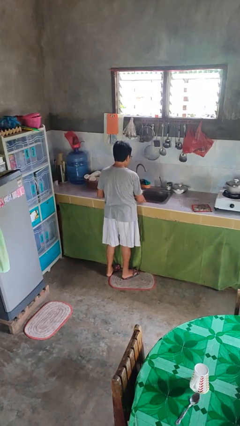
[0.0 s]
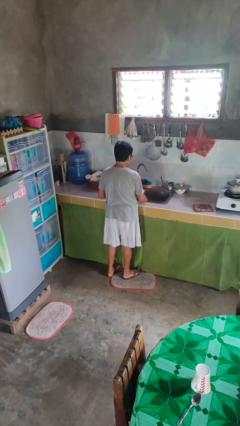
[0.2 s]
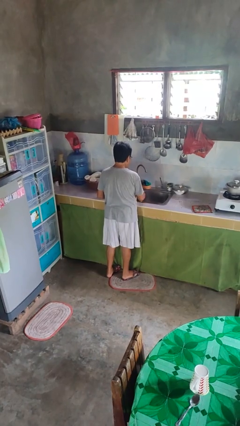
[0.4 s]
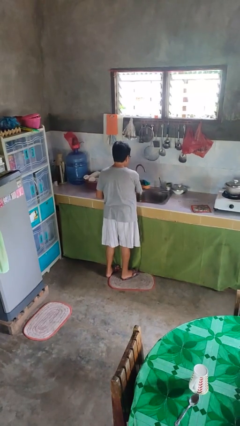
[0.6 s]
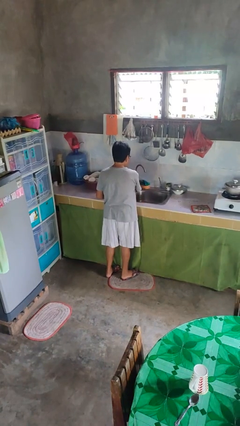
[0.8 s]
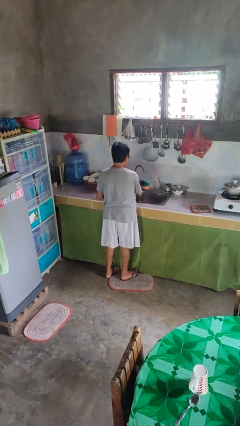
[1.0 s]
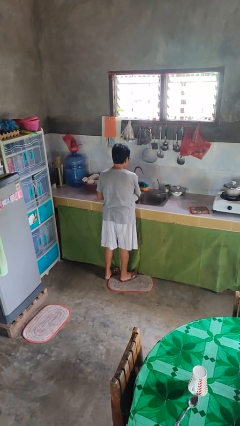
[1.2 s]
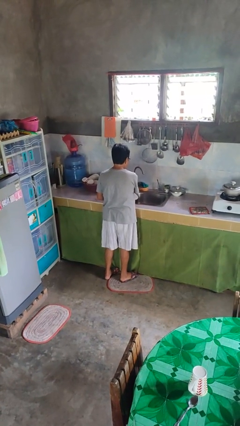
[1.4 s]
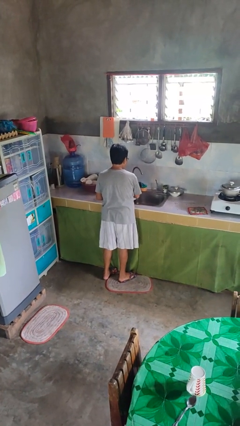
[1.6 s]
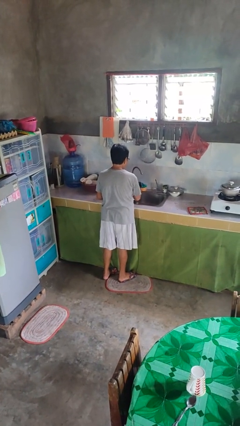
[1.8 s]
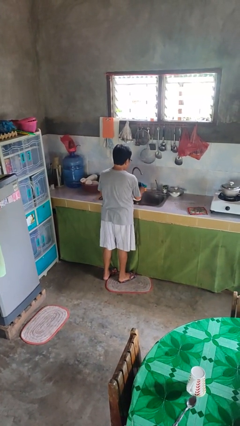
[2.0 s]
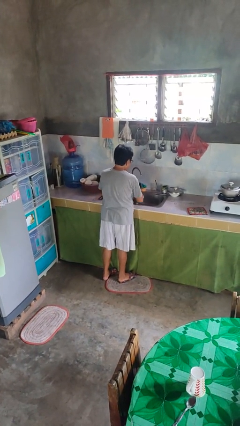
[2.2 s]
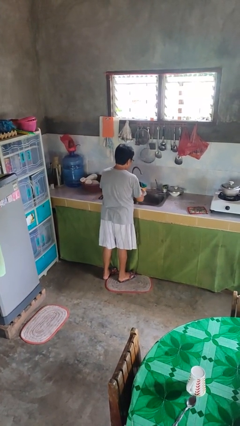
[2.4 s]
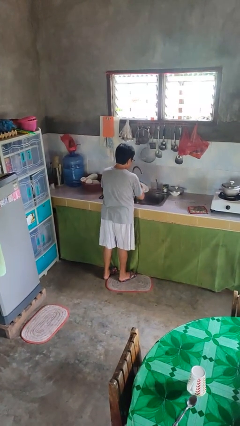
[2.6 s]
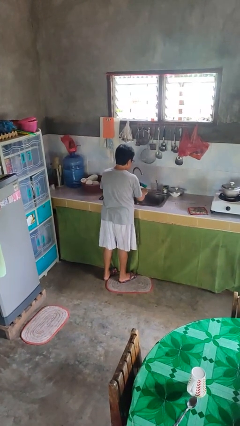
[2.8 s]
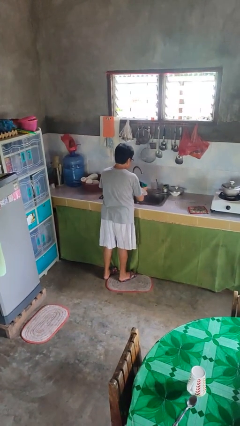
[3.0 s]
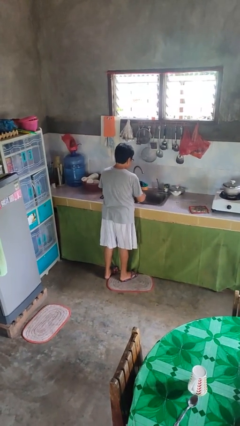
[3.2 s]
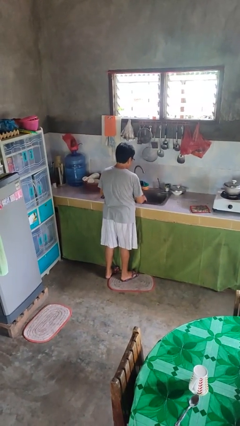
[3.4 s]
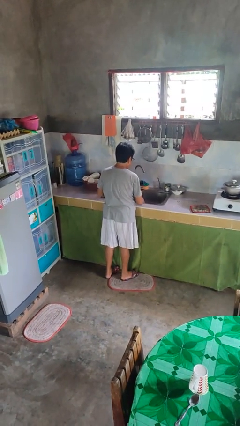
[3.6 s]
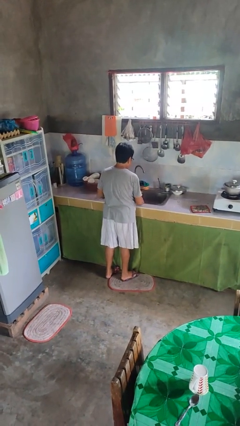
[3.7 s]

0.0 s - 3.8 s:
person washes dish

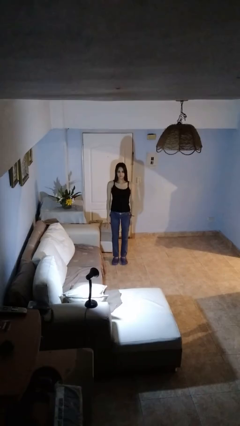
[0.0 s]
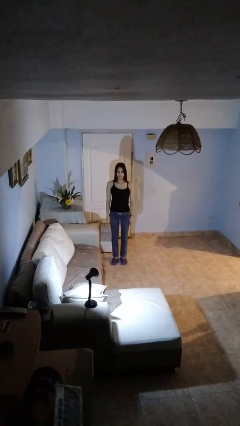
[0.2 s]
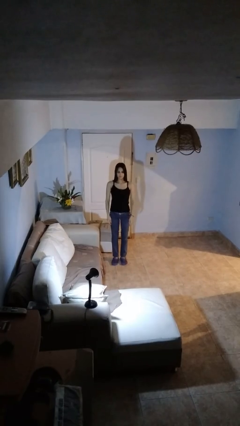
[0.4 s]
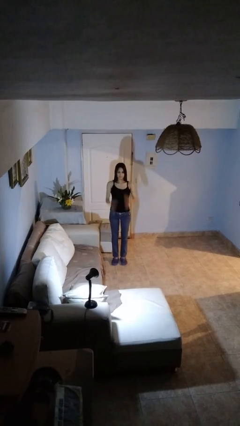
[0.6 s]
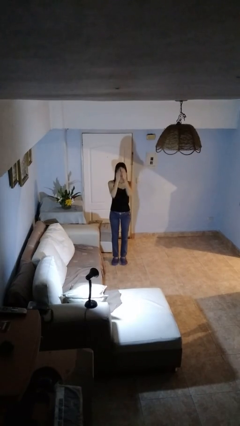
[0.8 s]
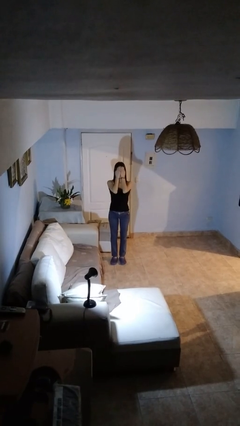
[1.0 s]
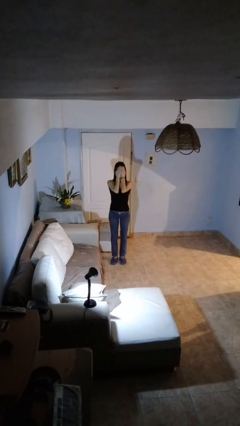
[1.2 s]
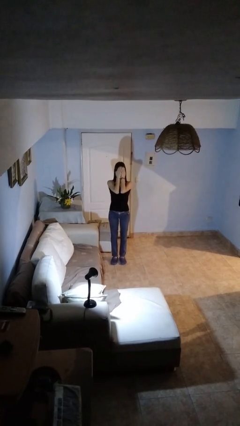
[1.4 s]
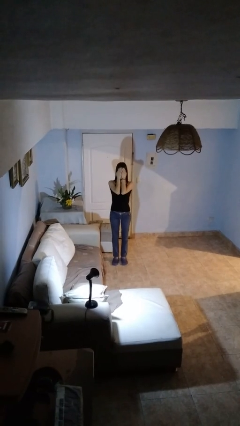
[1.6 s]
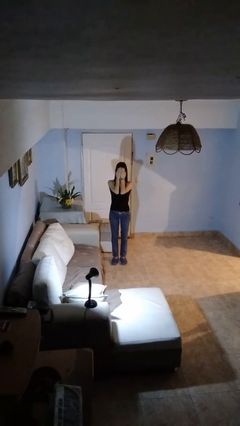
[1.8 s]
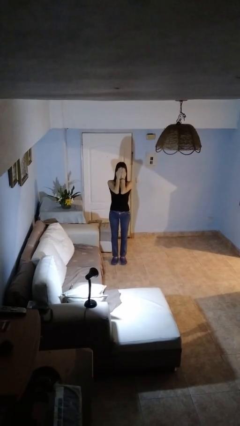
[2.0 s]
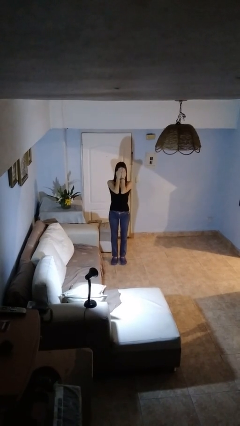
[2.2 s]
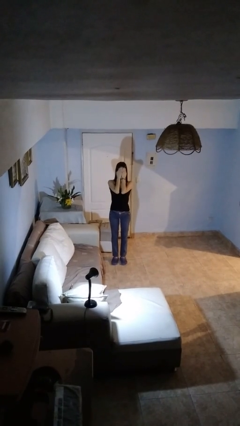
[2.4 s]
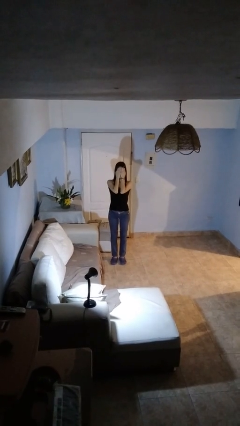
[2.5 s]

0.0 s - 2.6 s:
person covers face with hands

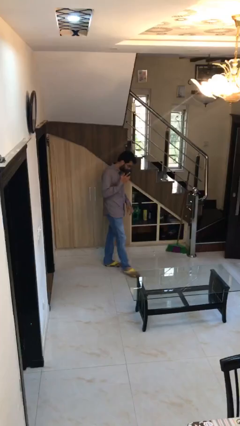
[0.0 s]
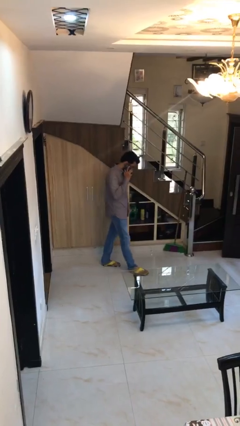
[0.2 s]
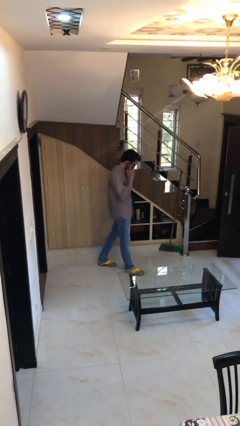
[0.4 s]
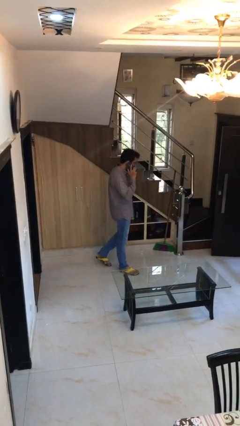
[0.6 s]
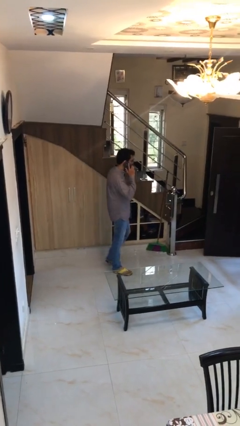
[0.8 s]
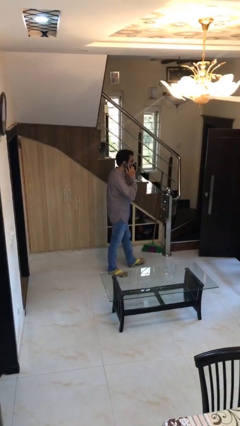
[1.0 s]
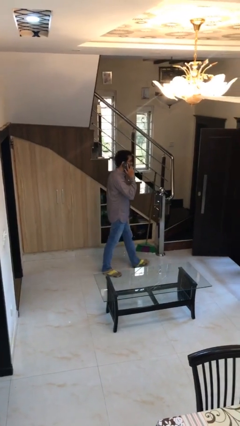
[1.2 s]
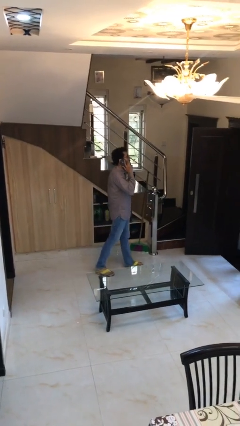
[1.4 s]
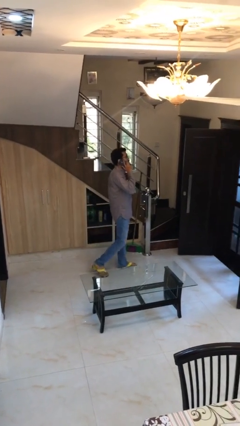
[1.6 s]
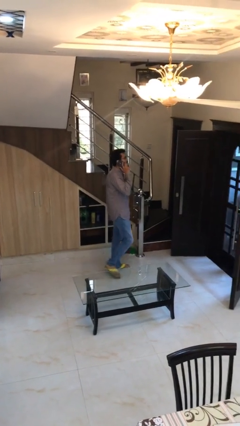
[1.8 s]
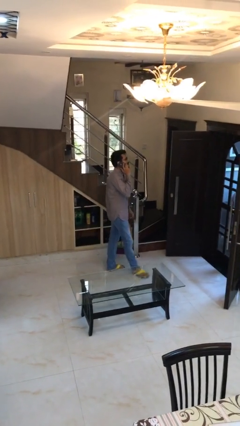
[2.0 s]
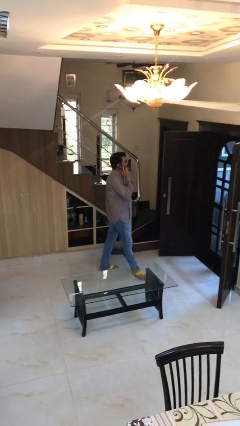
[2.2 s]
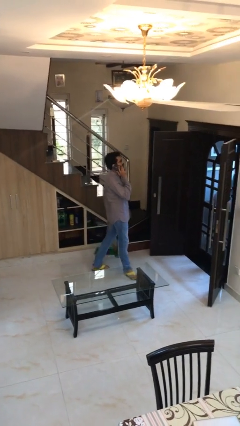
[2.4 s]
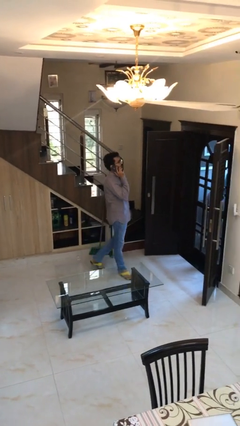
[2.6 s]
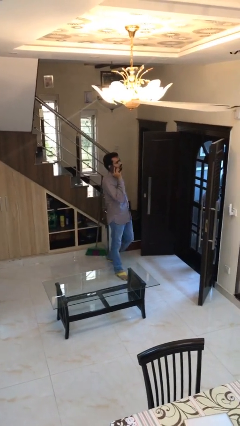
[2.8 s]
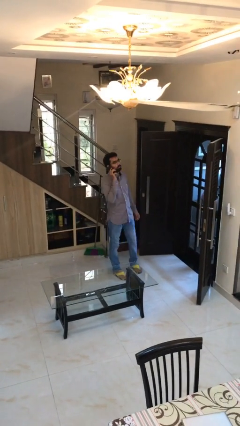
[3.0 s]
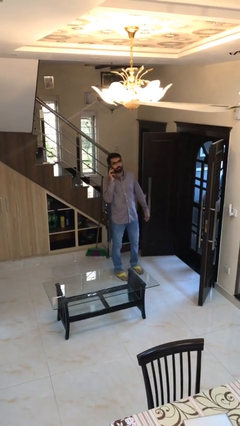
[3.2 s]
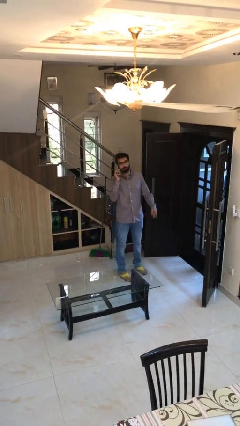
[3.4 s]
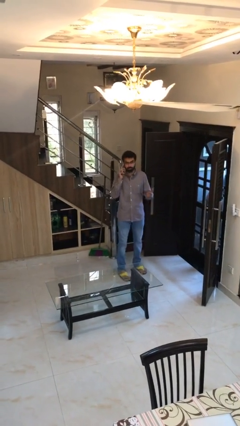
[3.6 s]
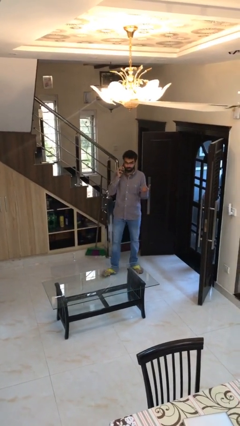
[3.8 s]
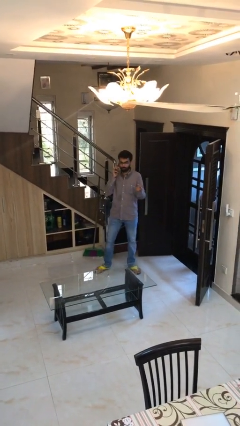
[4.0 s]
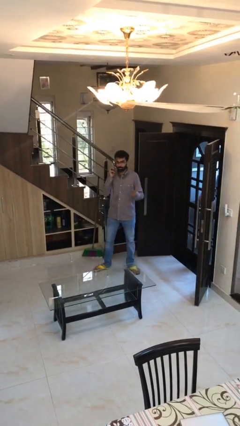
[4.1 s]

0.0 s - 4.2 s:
person talks on phone

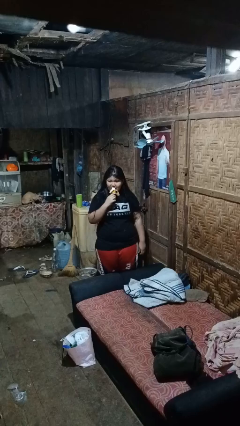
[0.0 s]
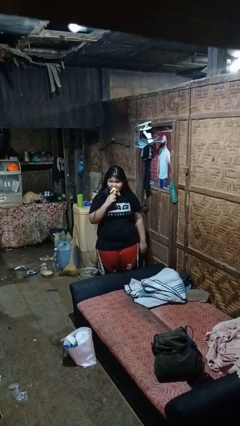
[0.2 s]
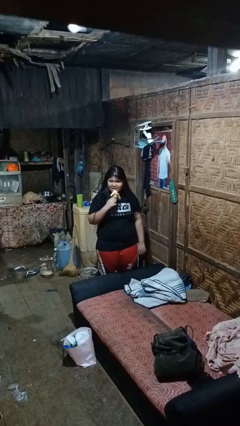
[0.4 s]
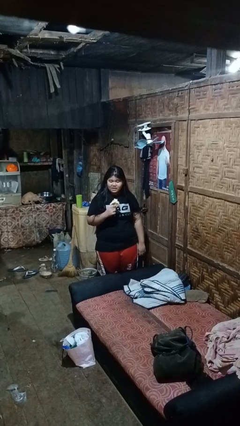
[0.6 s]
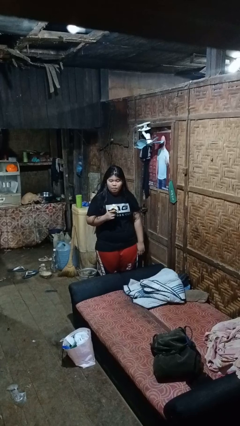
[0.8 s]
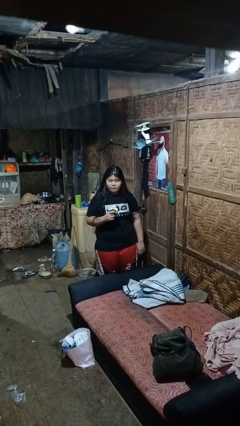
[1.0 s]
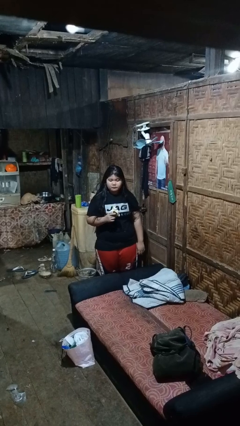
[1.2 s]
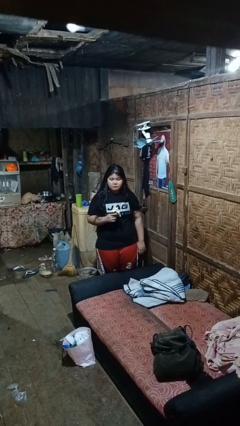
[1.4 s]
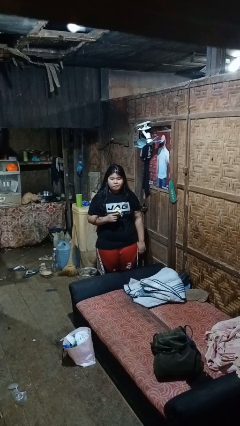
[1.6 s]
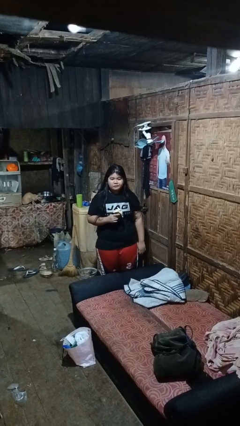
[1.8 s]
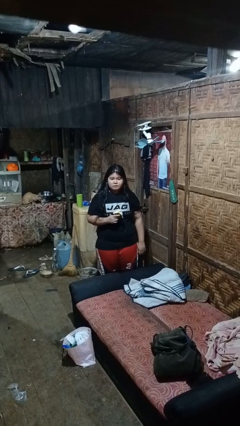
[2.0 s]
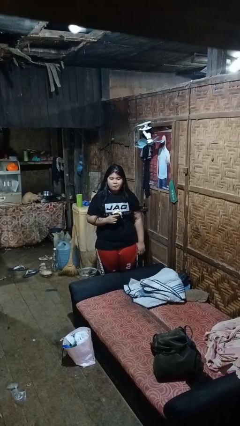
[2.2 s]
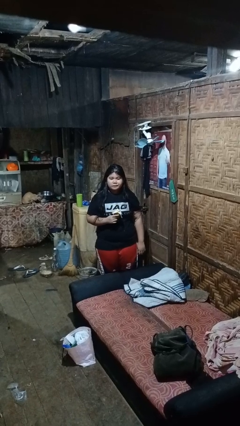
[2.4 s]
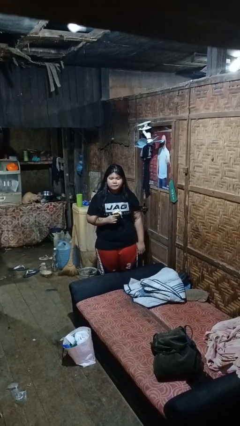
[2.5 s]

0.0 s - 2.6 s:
person eats banana

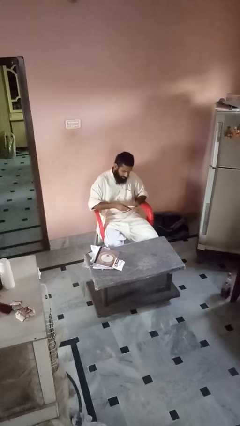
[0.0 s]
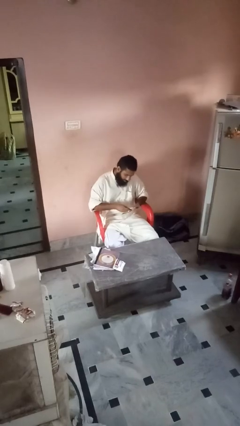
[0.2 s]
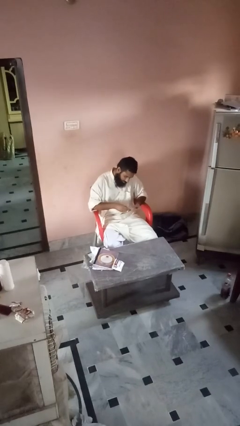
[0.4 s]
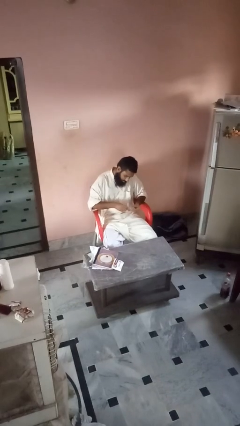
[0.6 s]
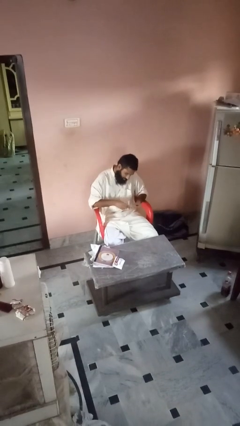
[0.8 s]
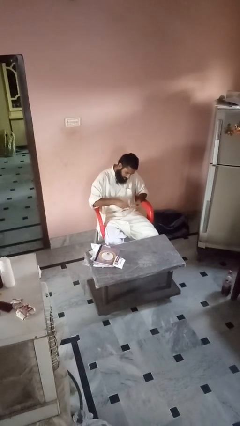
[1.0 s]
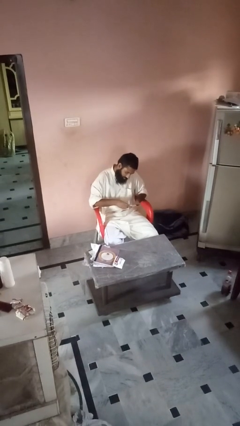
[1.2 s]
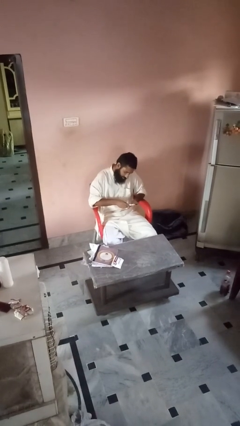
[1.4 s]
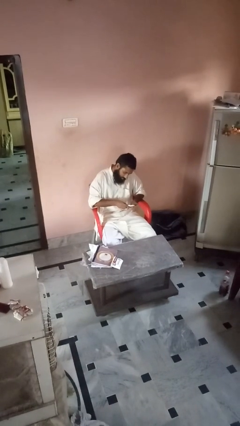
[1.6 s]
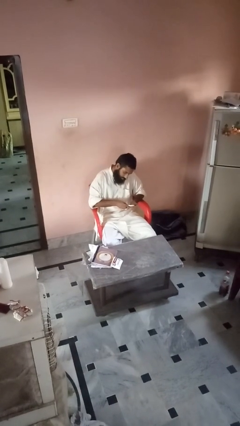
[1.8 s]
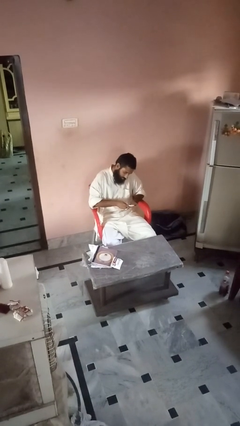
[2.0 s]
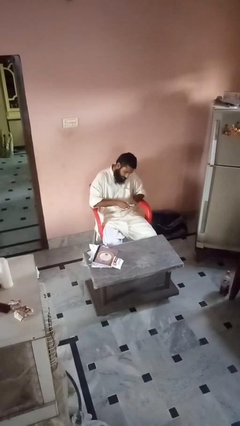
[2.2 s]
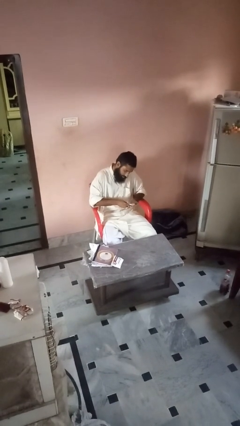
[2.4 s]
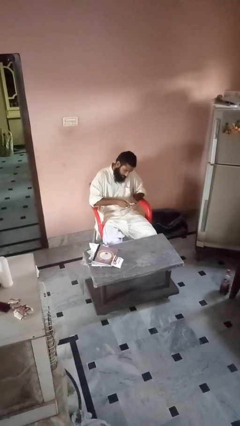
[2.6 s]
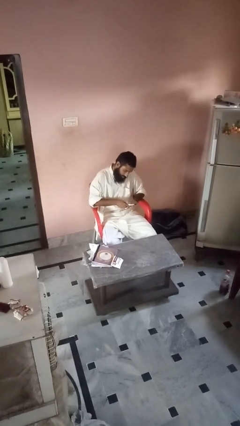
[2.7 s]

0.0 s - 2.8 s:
person files fingernails

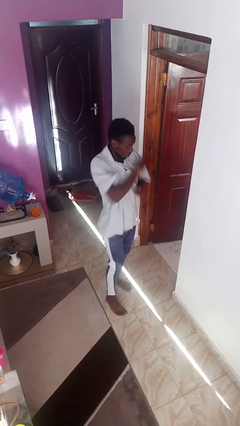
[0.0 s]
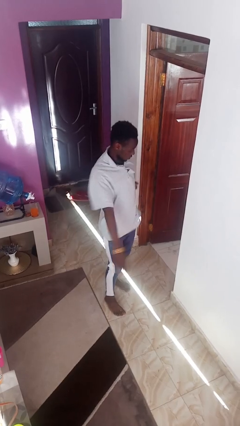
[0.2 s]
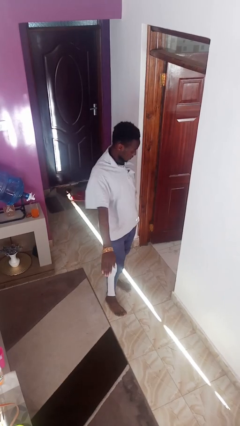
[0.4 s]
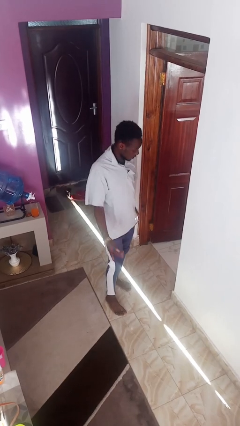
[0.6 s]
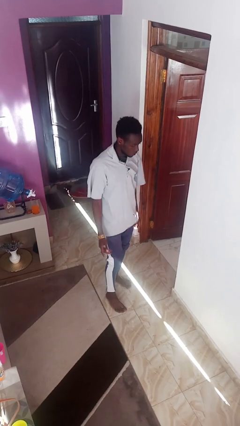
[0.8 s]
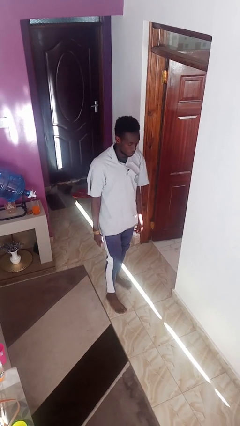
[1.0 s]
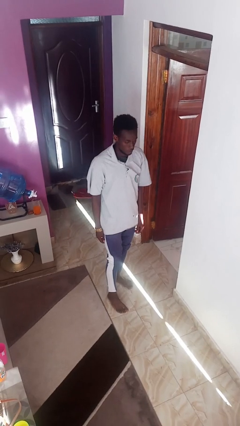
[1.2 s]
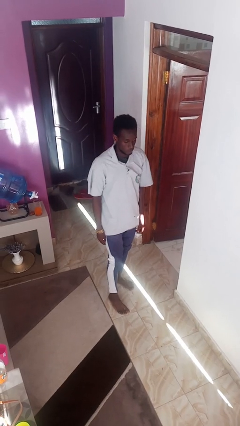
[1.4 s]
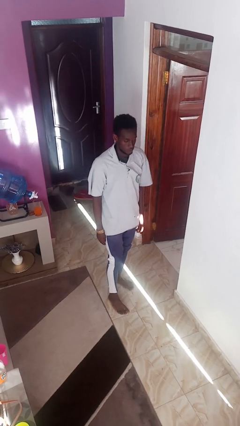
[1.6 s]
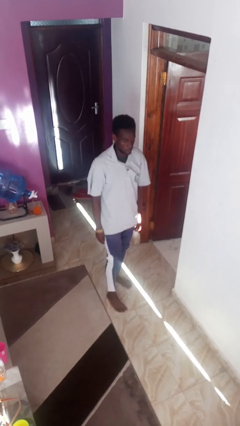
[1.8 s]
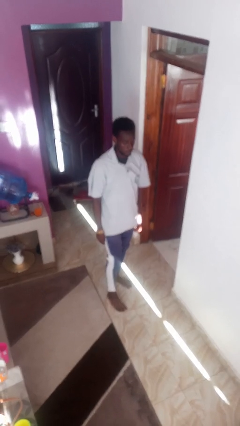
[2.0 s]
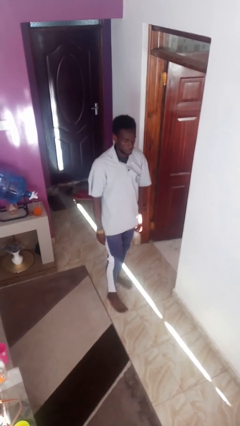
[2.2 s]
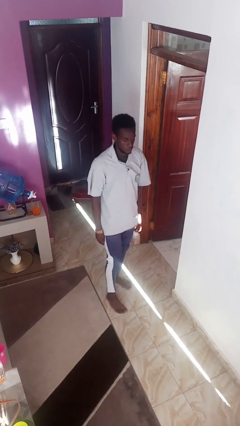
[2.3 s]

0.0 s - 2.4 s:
person karate chop
